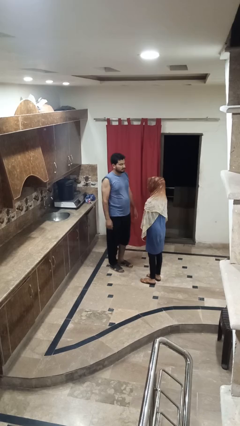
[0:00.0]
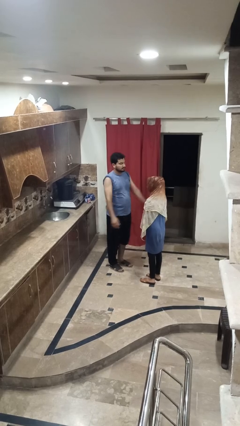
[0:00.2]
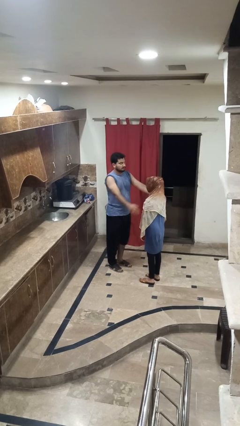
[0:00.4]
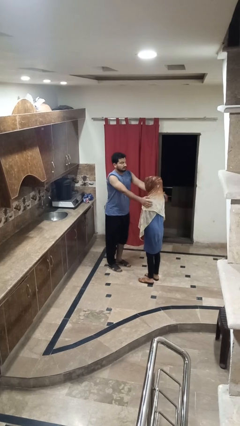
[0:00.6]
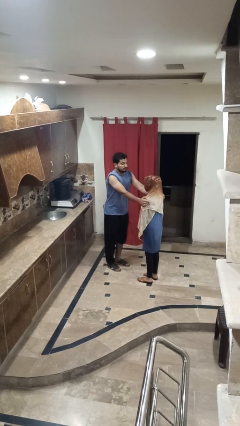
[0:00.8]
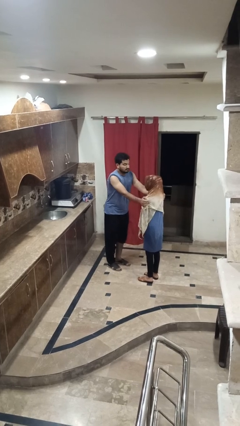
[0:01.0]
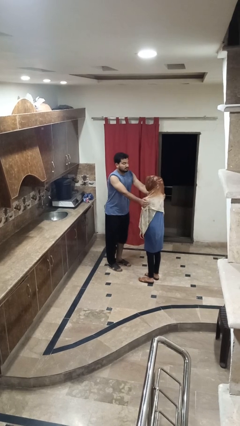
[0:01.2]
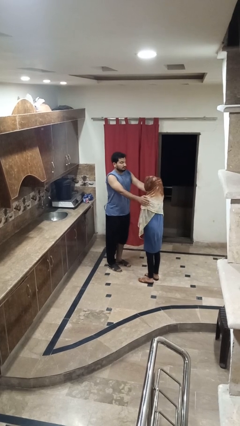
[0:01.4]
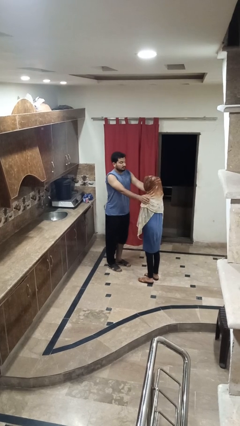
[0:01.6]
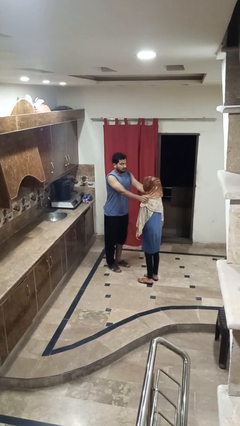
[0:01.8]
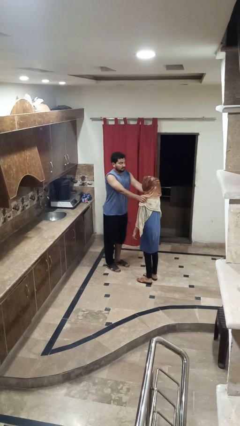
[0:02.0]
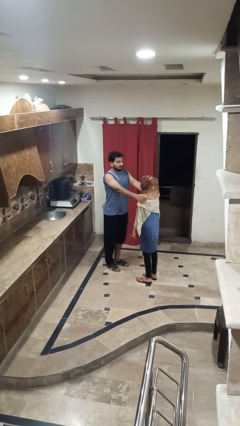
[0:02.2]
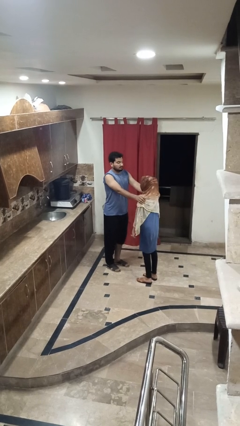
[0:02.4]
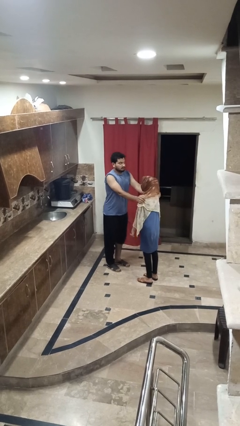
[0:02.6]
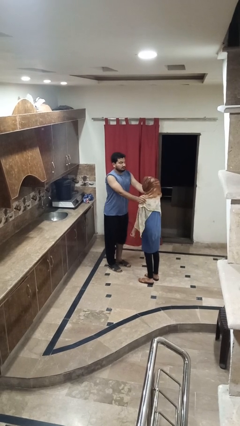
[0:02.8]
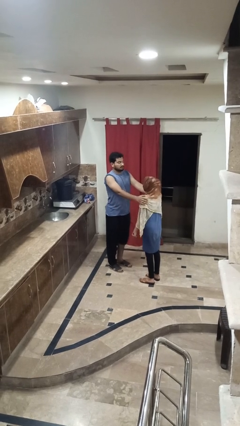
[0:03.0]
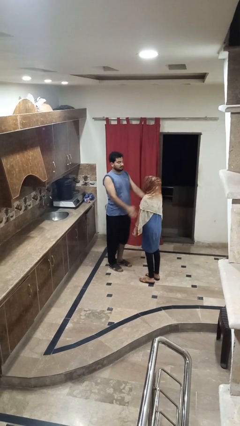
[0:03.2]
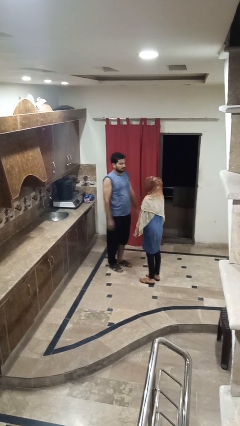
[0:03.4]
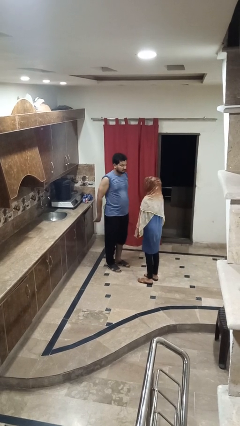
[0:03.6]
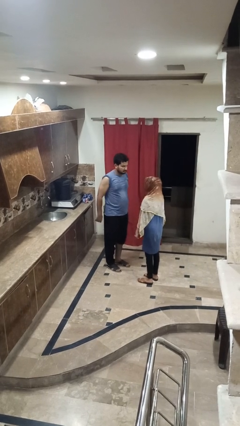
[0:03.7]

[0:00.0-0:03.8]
person pounds shoulders of person

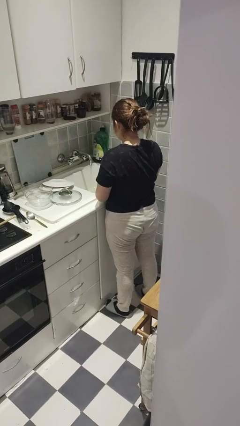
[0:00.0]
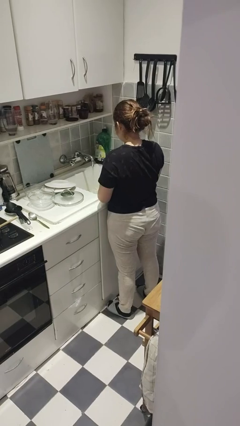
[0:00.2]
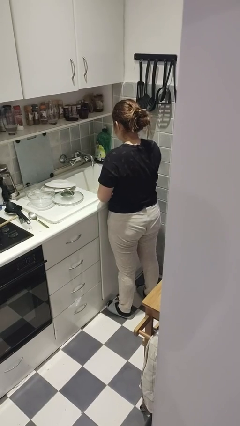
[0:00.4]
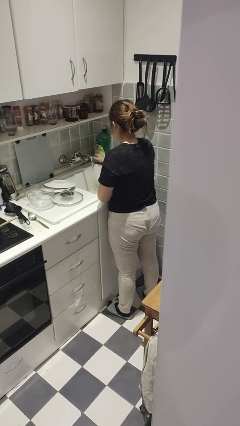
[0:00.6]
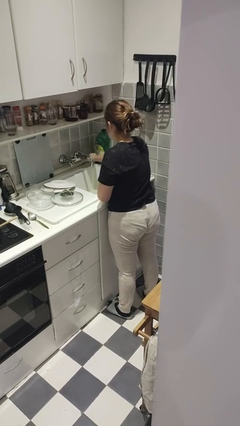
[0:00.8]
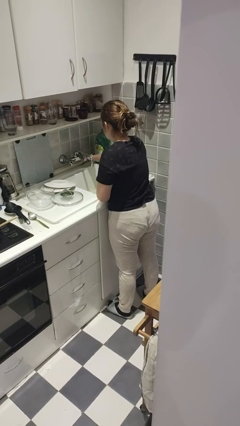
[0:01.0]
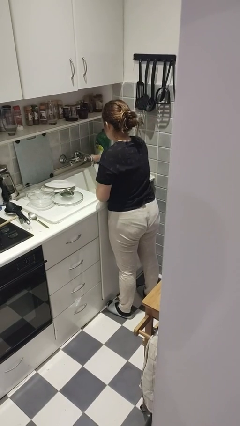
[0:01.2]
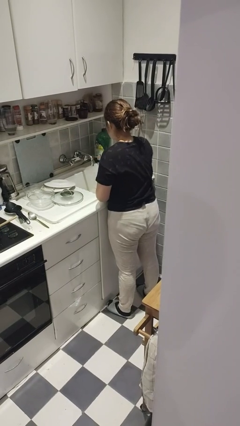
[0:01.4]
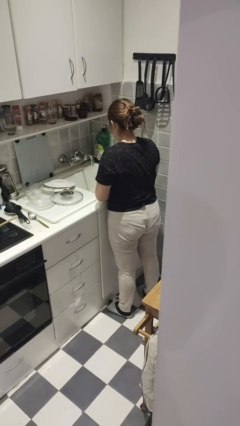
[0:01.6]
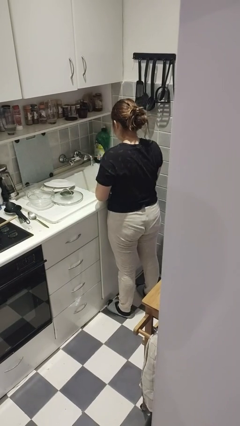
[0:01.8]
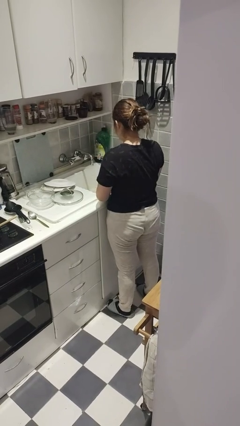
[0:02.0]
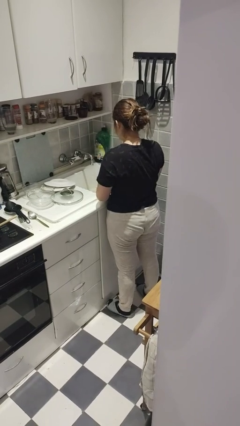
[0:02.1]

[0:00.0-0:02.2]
person turns off faucet

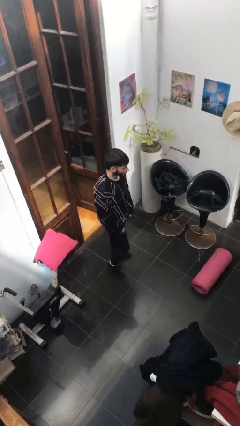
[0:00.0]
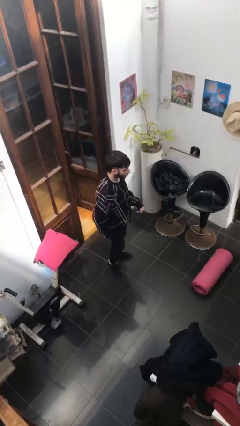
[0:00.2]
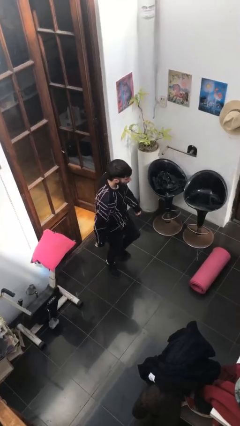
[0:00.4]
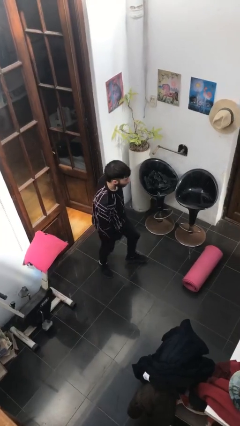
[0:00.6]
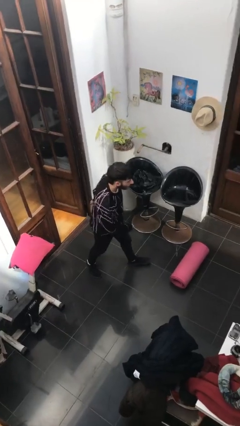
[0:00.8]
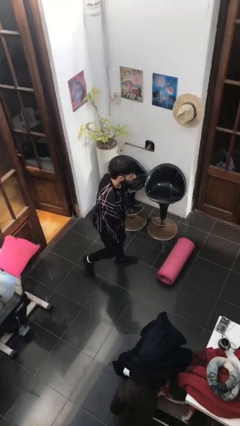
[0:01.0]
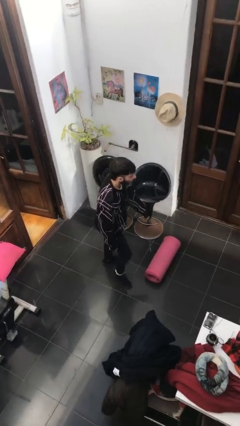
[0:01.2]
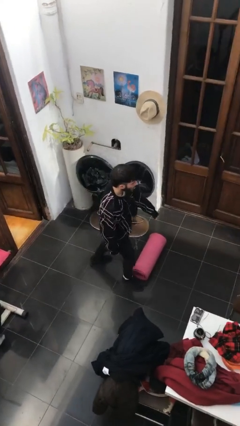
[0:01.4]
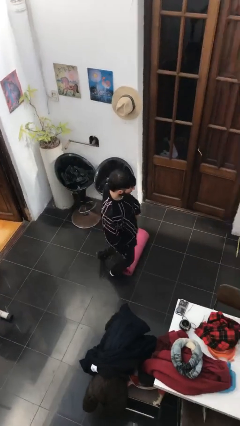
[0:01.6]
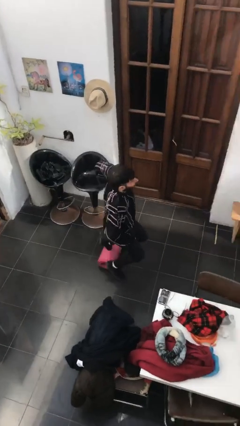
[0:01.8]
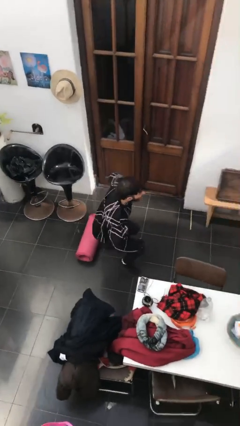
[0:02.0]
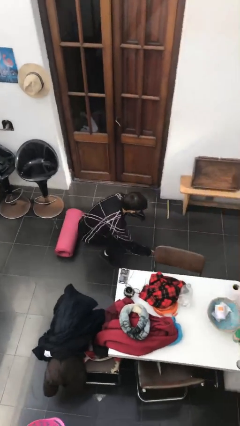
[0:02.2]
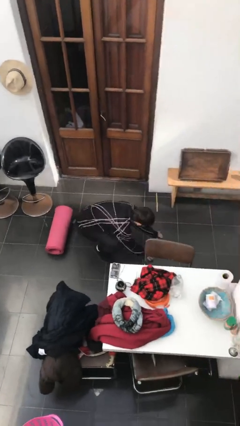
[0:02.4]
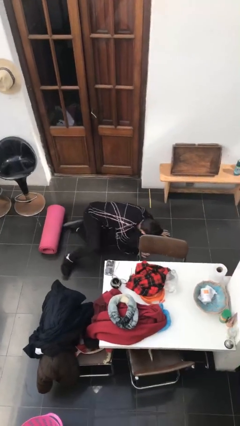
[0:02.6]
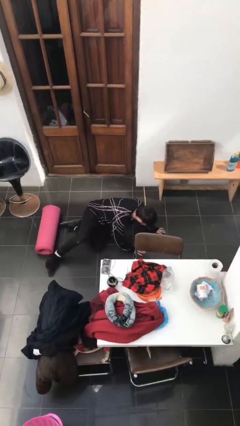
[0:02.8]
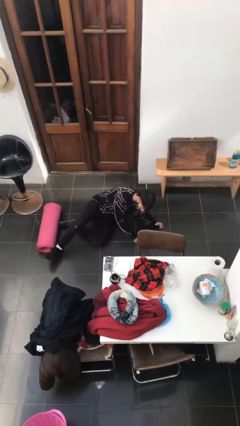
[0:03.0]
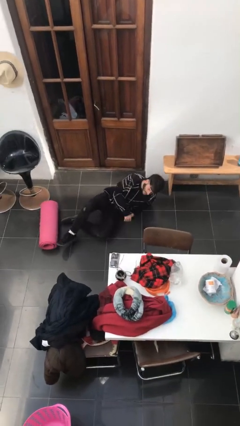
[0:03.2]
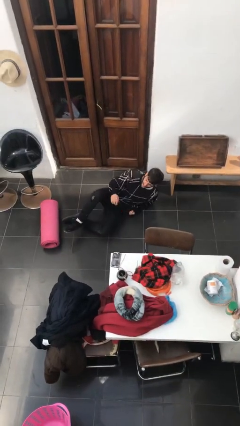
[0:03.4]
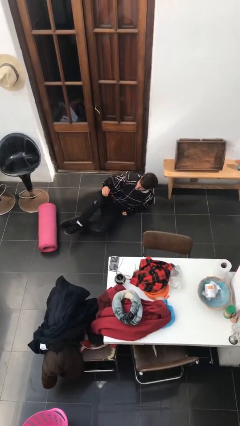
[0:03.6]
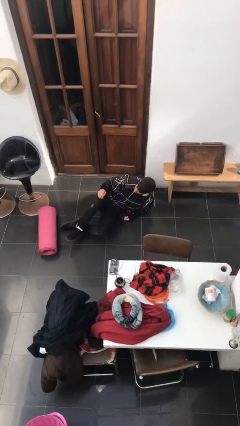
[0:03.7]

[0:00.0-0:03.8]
person trips on object on floor

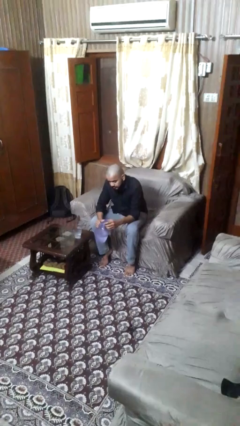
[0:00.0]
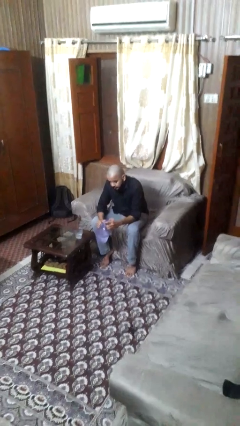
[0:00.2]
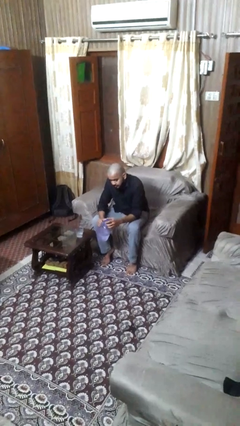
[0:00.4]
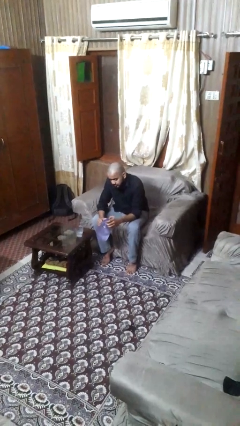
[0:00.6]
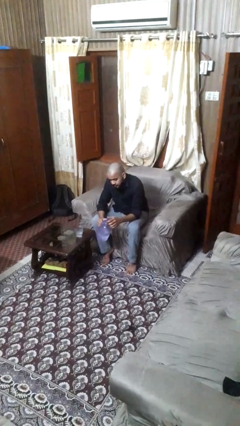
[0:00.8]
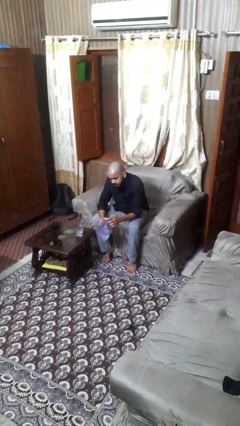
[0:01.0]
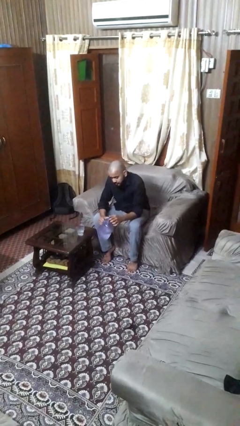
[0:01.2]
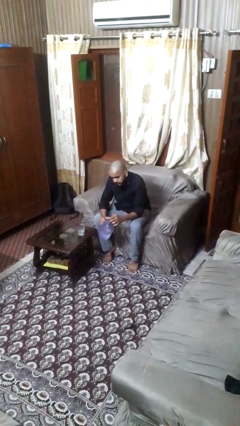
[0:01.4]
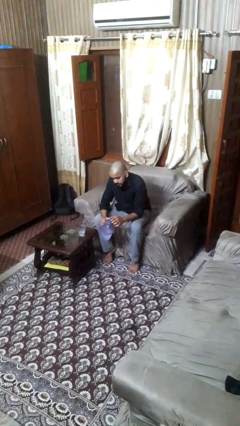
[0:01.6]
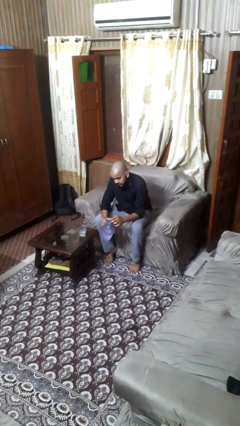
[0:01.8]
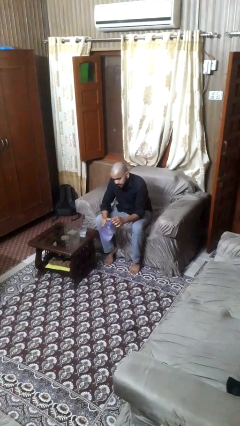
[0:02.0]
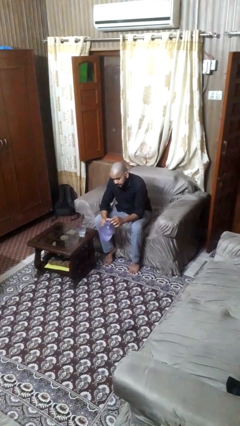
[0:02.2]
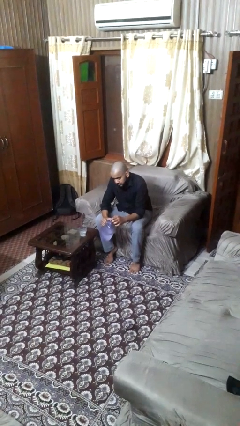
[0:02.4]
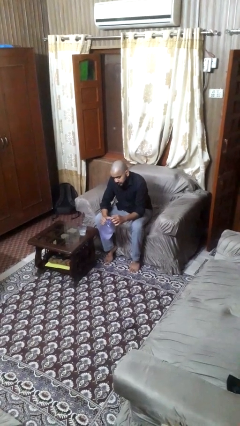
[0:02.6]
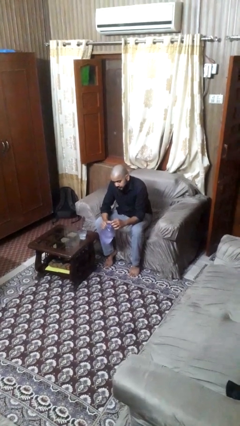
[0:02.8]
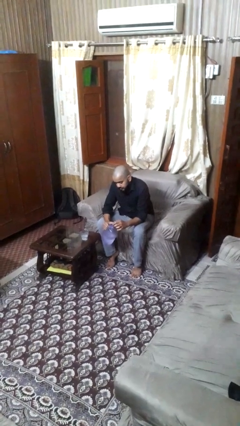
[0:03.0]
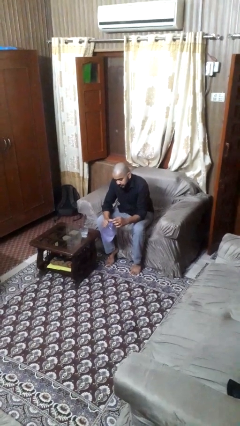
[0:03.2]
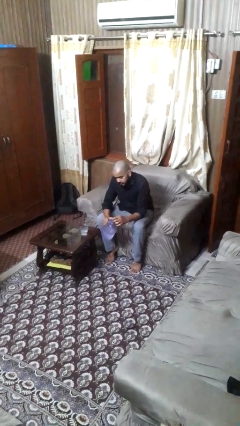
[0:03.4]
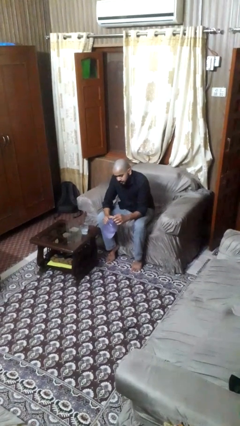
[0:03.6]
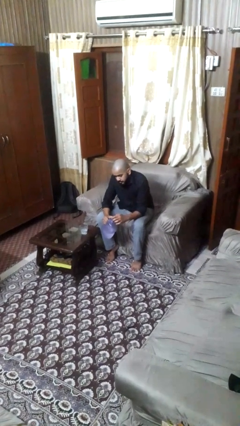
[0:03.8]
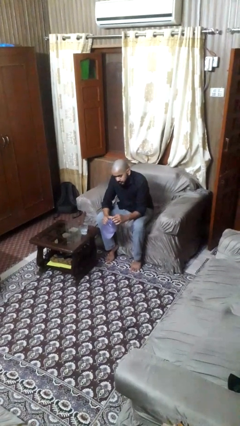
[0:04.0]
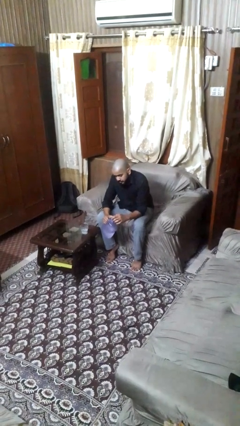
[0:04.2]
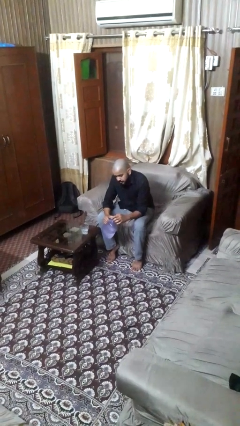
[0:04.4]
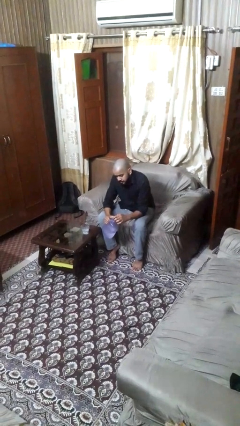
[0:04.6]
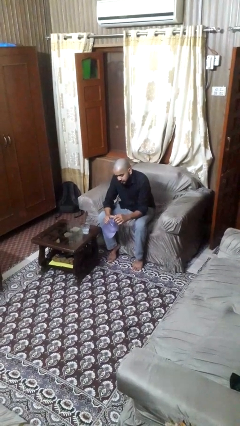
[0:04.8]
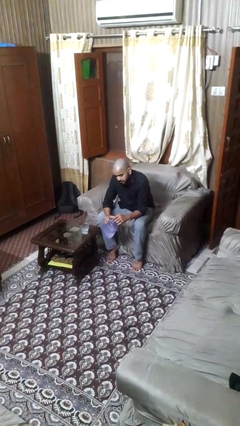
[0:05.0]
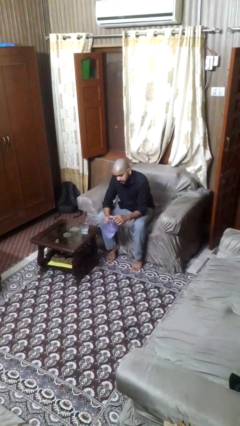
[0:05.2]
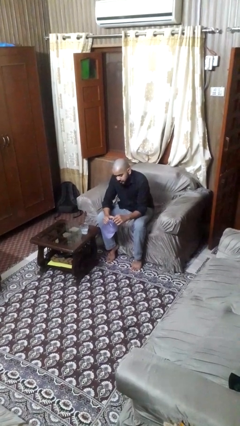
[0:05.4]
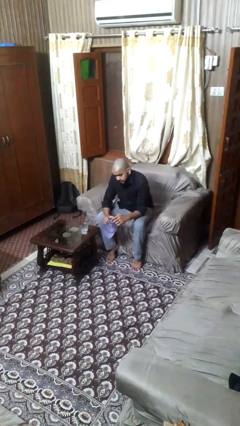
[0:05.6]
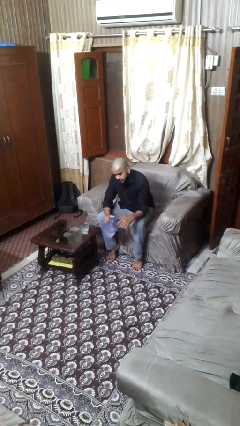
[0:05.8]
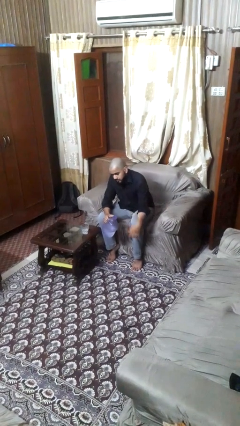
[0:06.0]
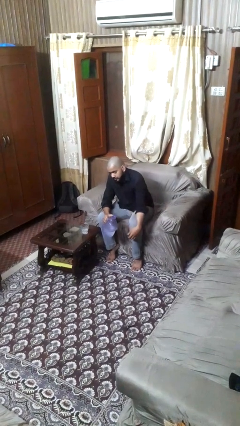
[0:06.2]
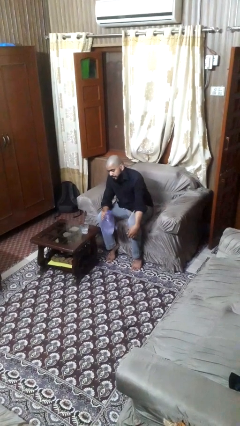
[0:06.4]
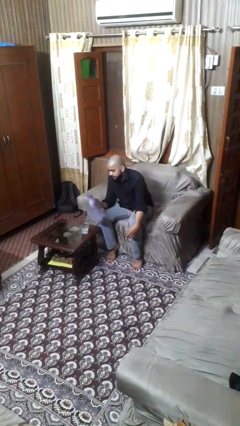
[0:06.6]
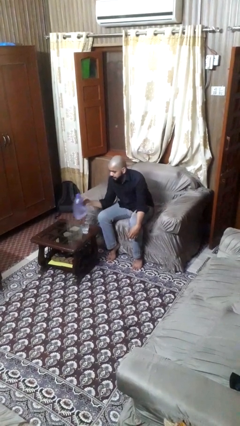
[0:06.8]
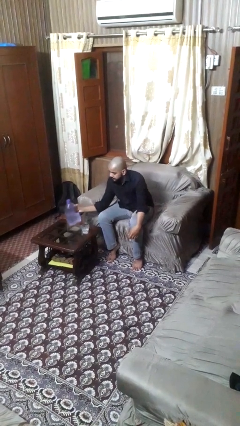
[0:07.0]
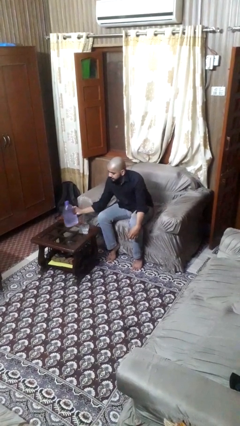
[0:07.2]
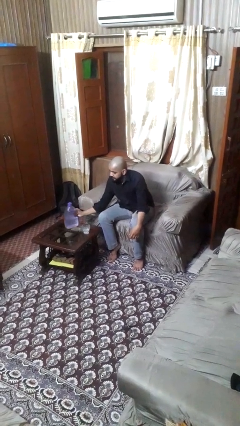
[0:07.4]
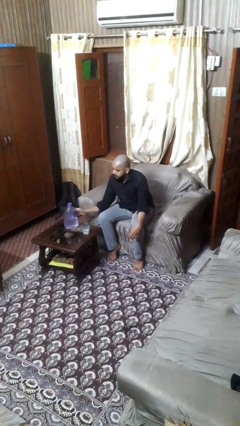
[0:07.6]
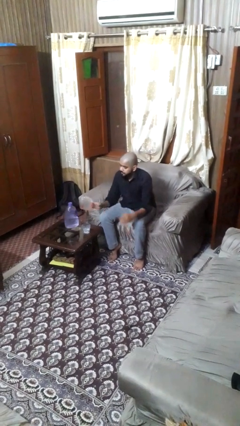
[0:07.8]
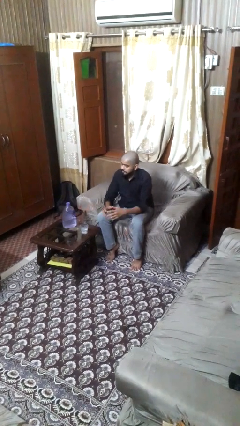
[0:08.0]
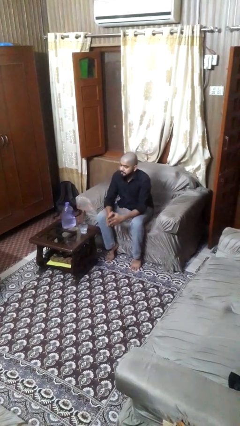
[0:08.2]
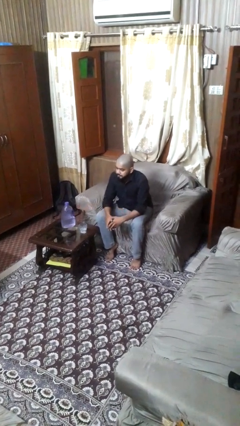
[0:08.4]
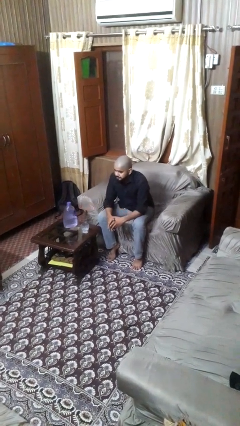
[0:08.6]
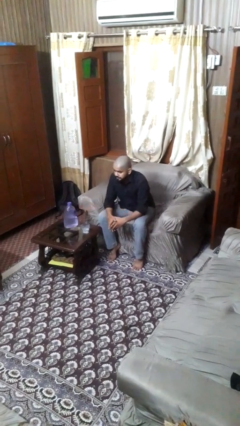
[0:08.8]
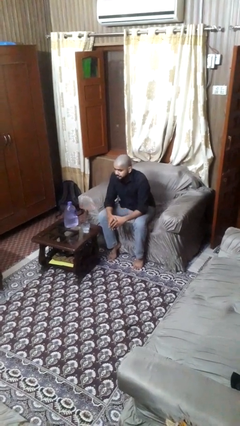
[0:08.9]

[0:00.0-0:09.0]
person screws lid to bottle
